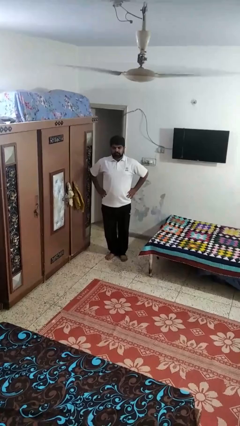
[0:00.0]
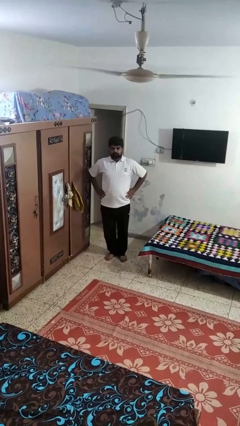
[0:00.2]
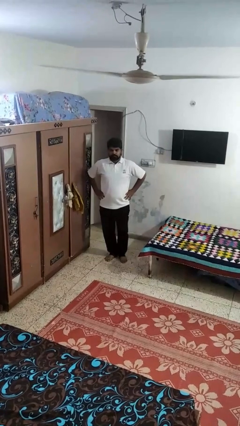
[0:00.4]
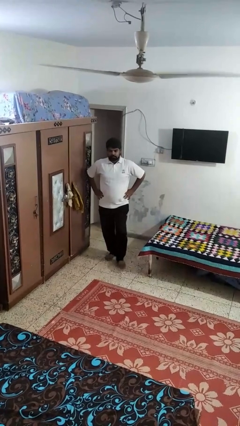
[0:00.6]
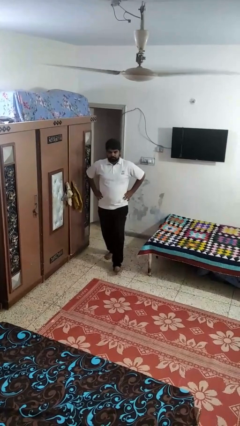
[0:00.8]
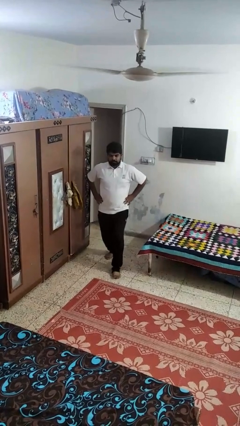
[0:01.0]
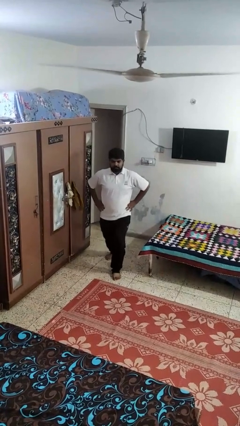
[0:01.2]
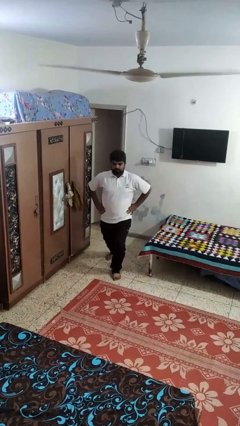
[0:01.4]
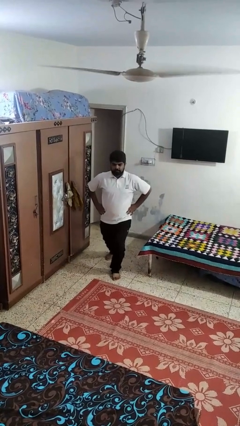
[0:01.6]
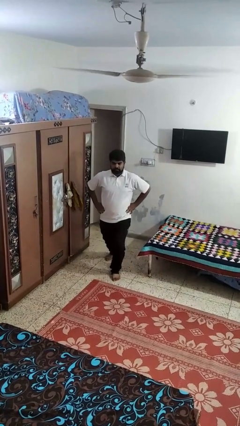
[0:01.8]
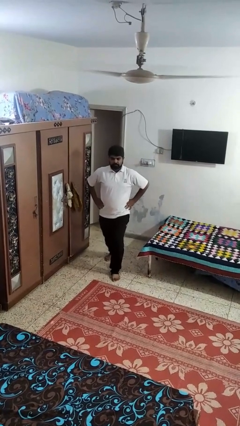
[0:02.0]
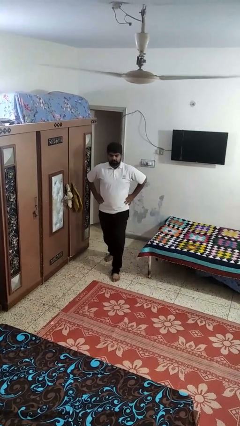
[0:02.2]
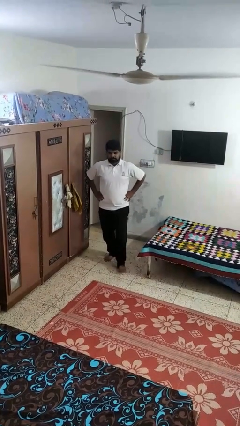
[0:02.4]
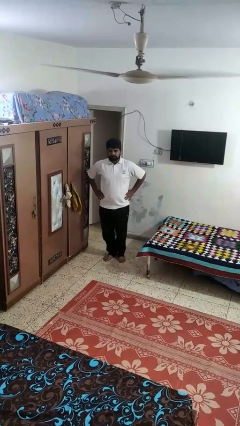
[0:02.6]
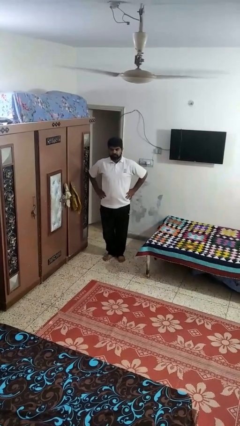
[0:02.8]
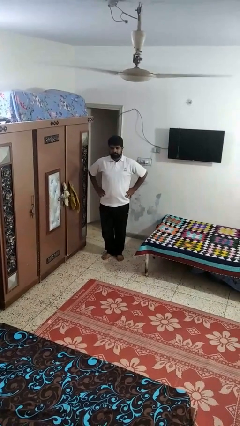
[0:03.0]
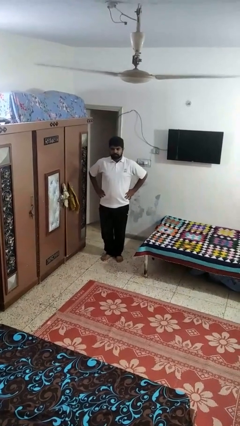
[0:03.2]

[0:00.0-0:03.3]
person exercises with lunges

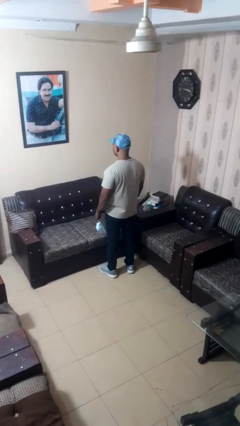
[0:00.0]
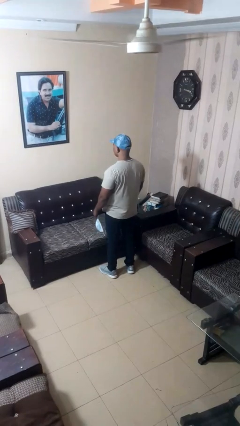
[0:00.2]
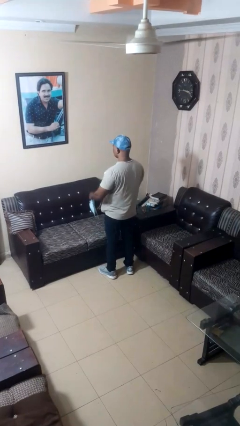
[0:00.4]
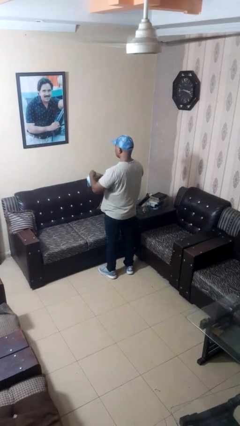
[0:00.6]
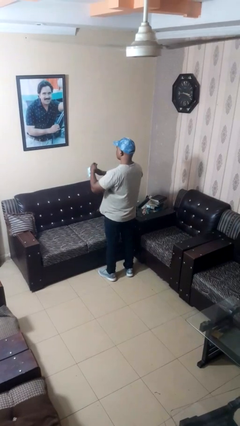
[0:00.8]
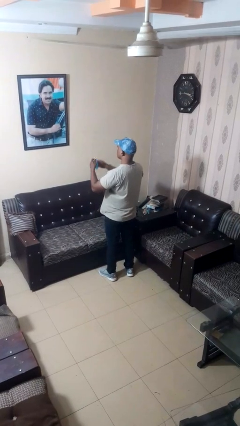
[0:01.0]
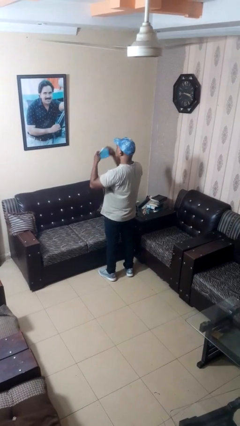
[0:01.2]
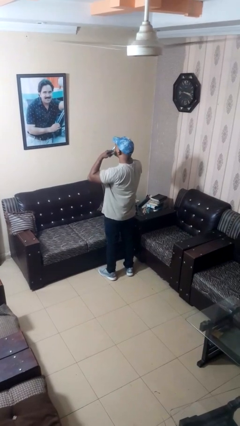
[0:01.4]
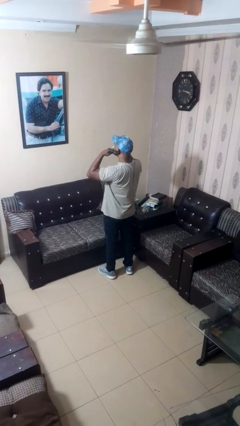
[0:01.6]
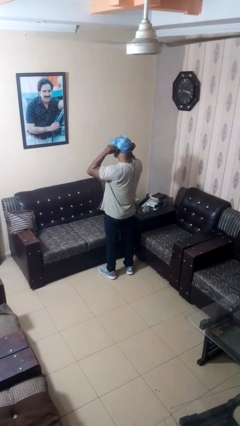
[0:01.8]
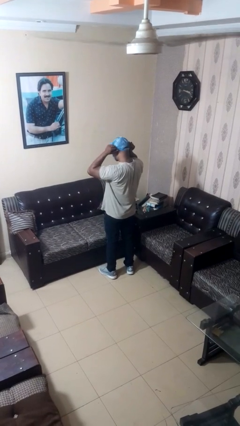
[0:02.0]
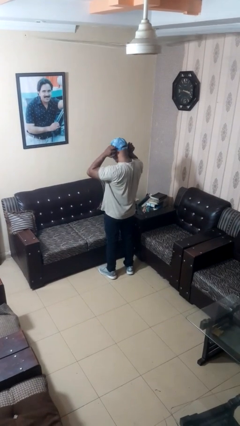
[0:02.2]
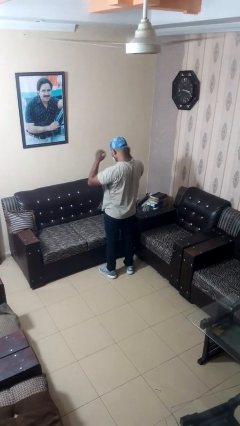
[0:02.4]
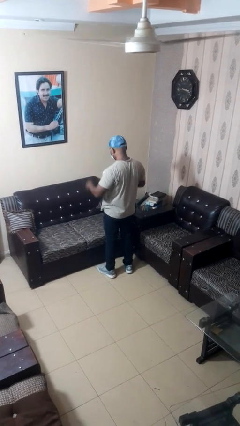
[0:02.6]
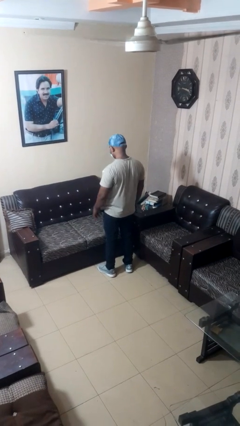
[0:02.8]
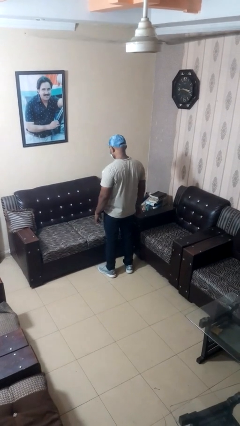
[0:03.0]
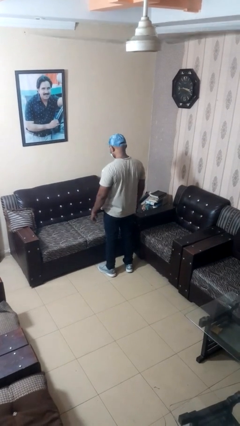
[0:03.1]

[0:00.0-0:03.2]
person puts on facemask

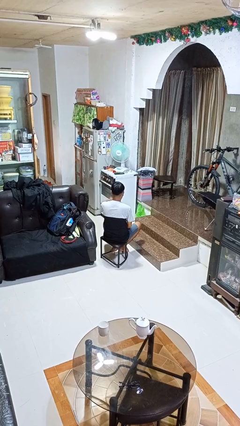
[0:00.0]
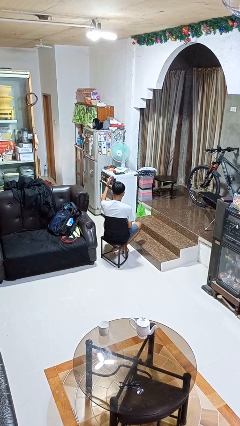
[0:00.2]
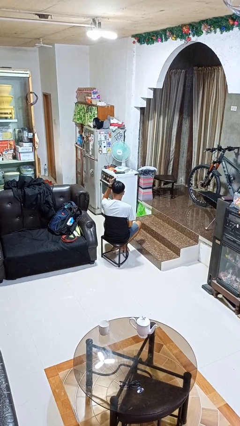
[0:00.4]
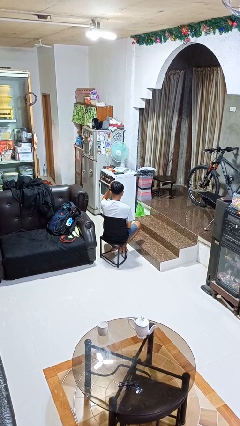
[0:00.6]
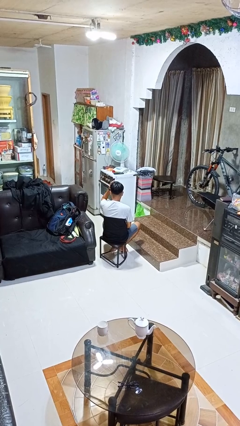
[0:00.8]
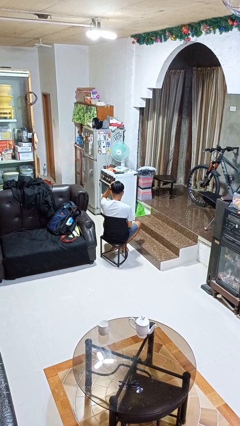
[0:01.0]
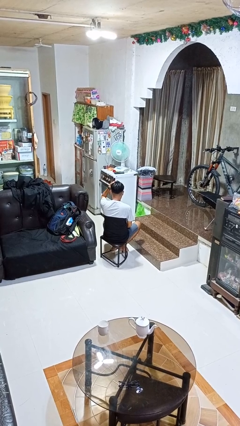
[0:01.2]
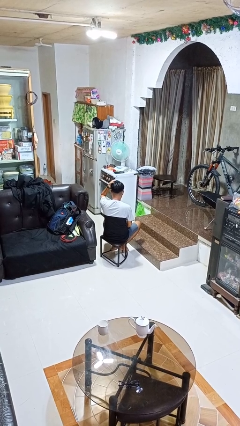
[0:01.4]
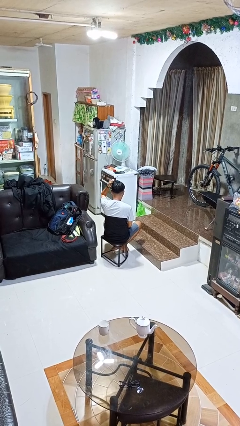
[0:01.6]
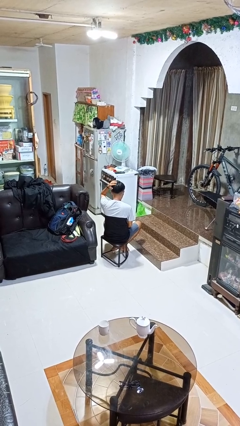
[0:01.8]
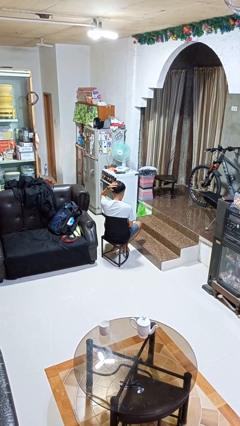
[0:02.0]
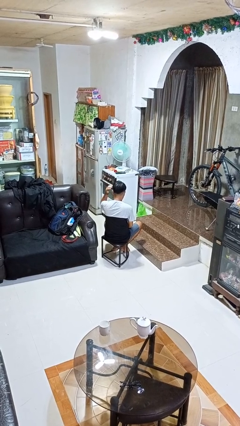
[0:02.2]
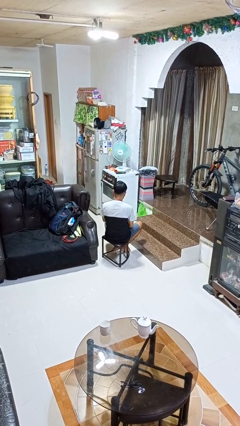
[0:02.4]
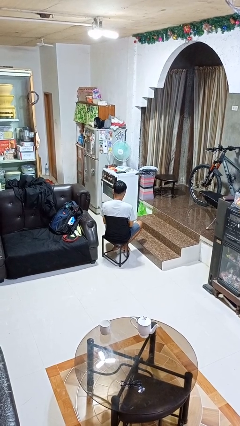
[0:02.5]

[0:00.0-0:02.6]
person pats head

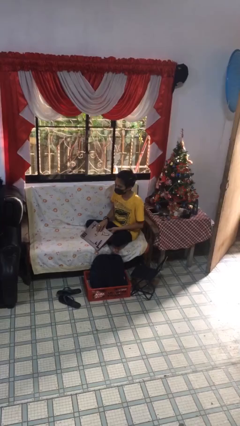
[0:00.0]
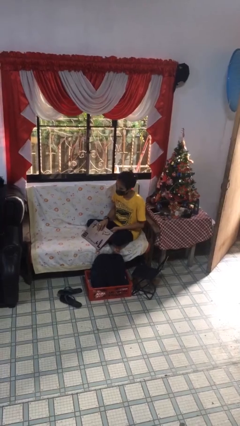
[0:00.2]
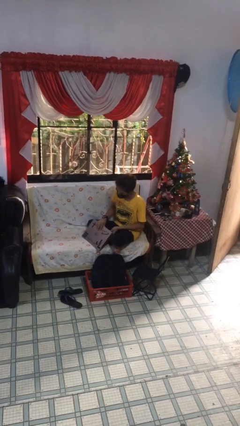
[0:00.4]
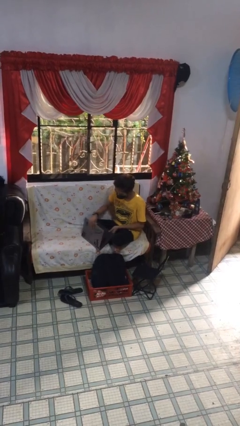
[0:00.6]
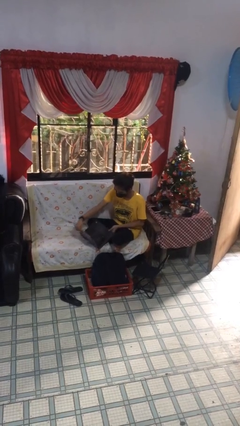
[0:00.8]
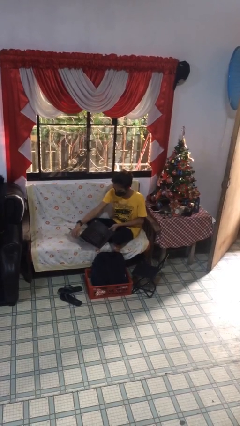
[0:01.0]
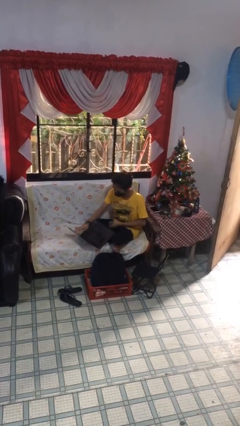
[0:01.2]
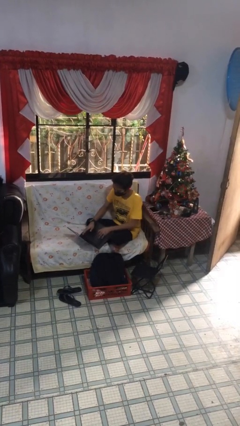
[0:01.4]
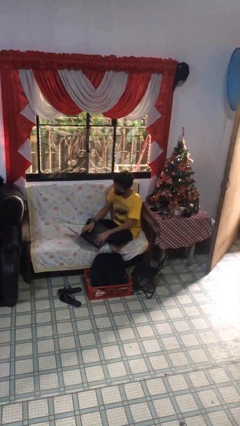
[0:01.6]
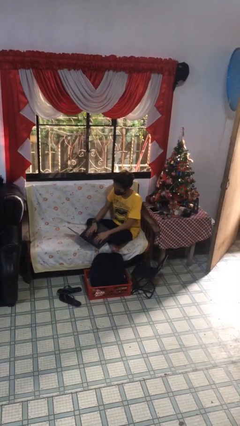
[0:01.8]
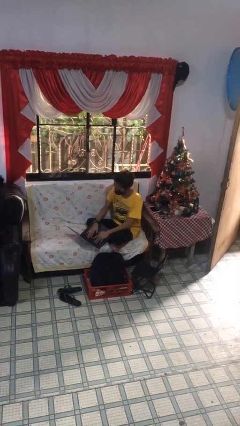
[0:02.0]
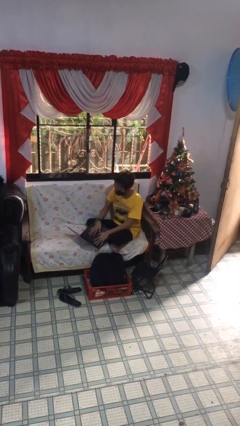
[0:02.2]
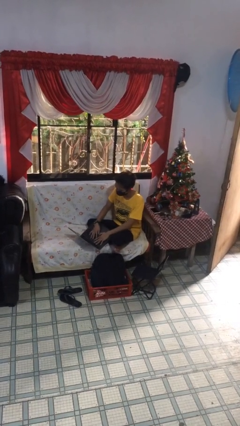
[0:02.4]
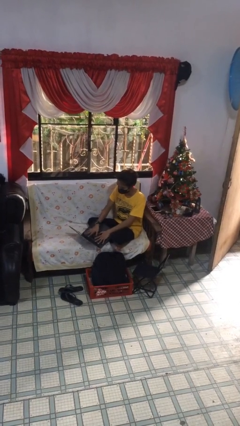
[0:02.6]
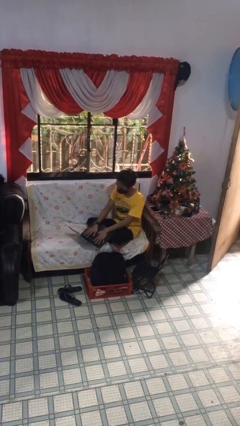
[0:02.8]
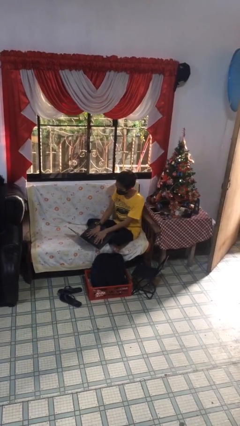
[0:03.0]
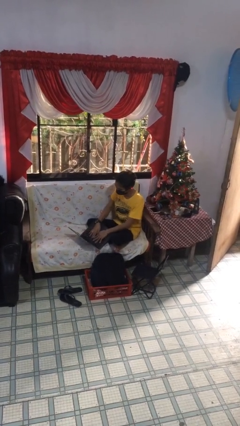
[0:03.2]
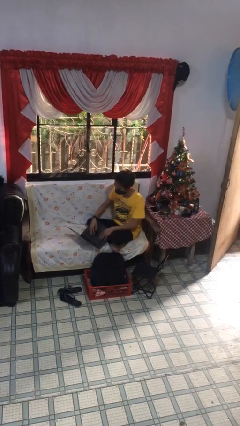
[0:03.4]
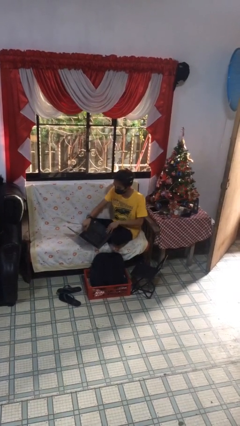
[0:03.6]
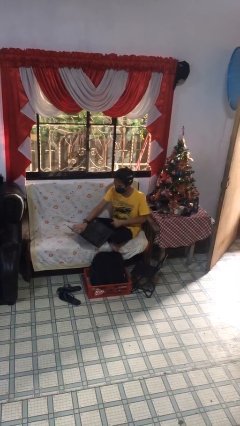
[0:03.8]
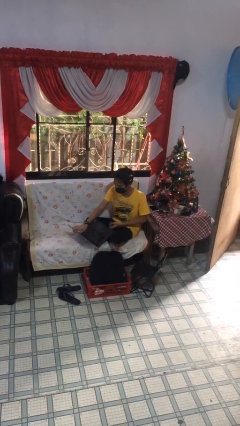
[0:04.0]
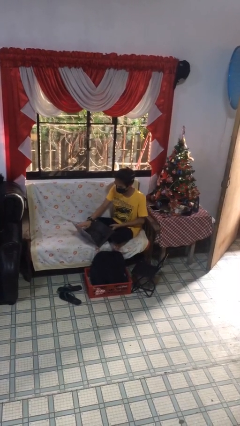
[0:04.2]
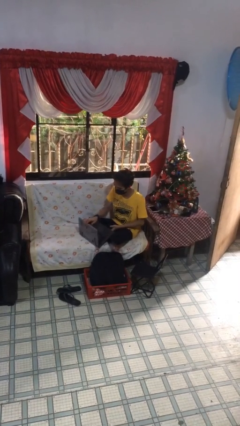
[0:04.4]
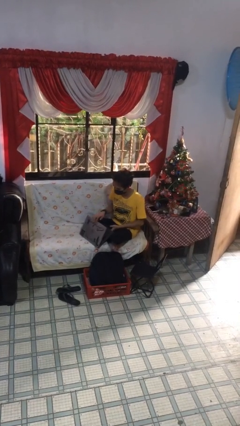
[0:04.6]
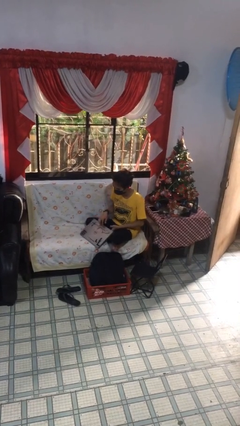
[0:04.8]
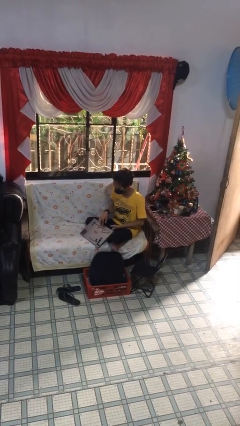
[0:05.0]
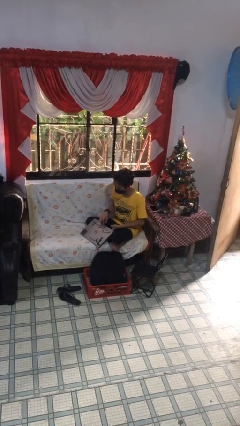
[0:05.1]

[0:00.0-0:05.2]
person interacts with laptop

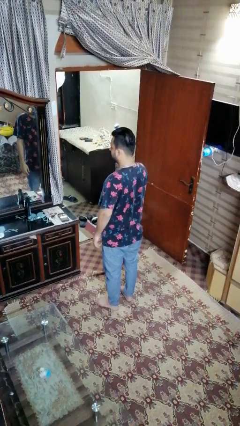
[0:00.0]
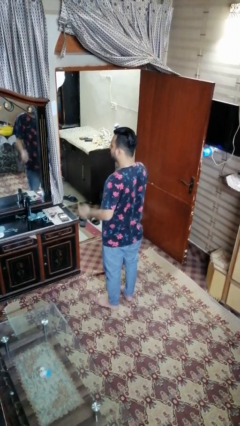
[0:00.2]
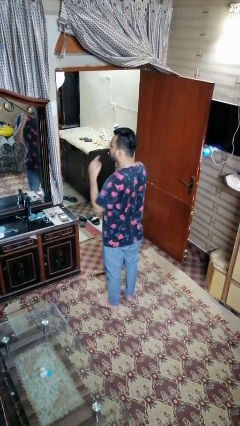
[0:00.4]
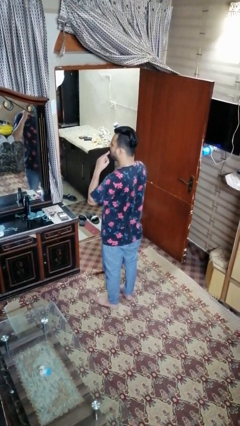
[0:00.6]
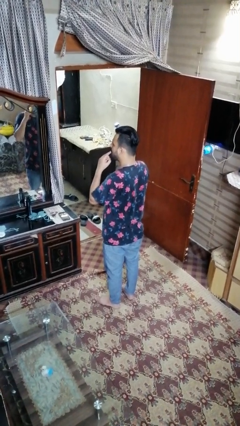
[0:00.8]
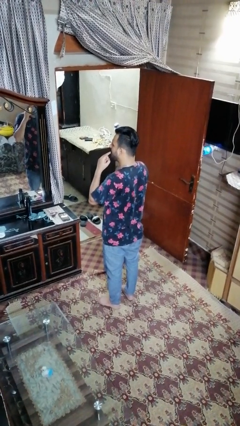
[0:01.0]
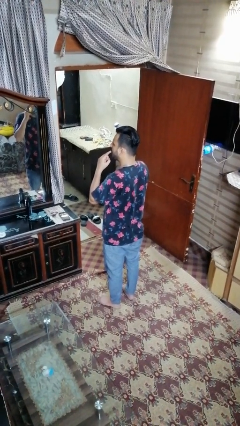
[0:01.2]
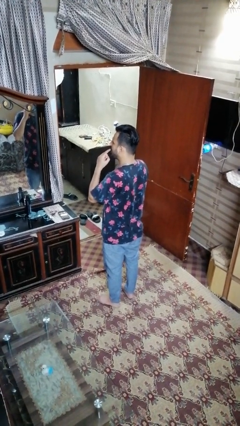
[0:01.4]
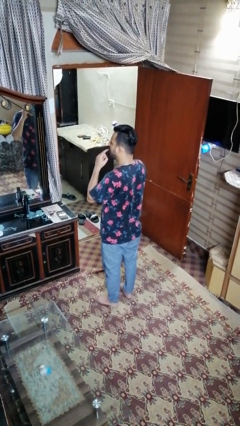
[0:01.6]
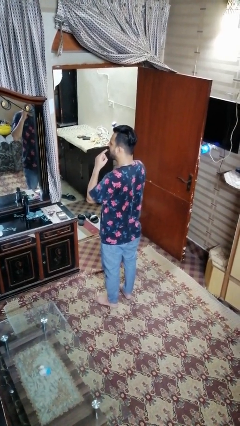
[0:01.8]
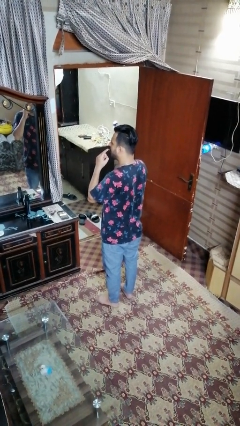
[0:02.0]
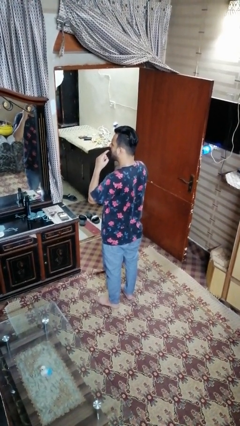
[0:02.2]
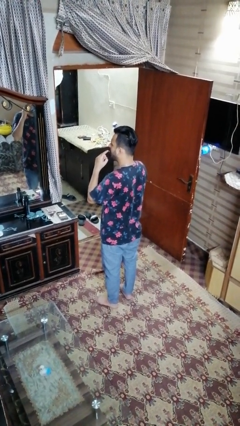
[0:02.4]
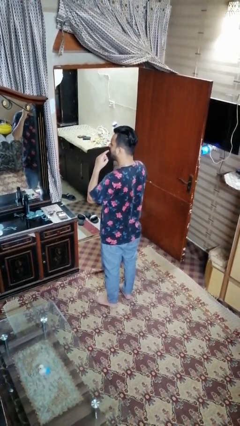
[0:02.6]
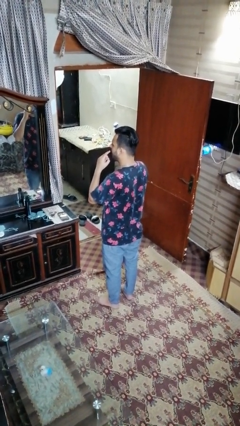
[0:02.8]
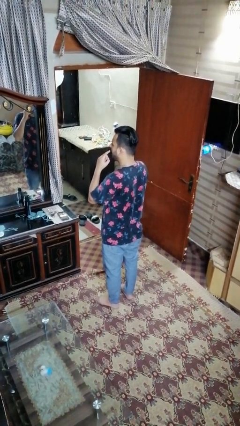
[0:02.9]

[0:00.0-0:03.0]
person licks fingers
